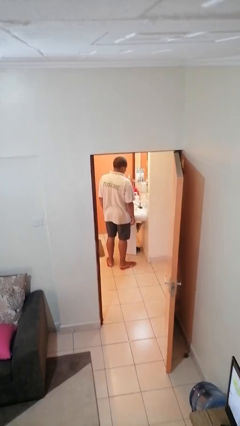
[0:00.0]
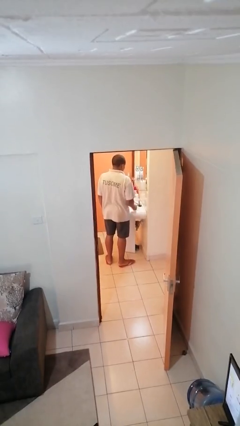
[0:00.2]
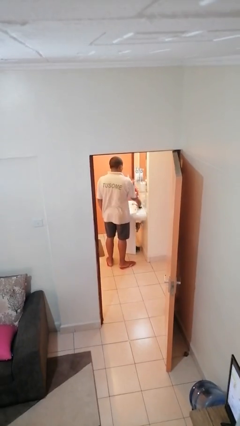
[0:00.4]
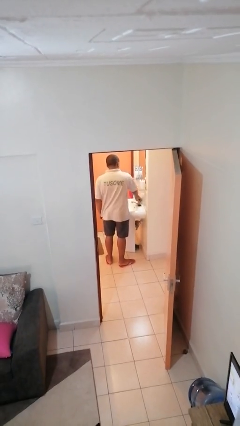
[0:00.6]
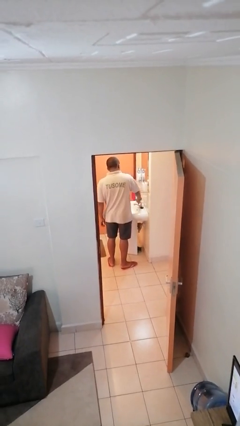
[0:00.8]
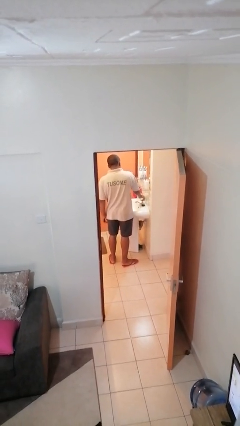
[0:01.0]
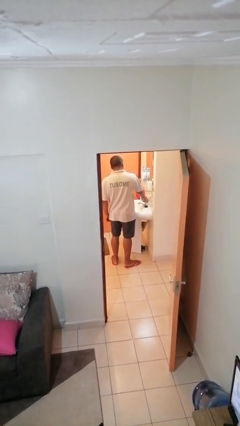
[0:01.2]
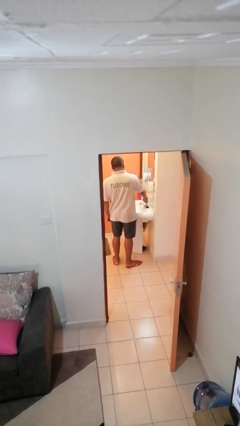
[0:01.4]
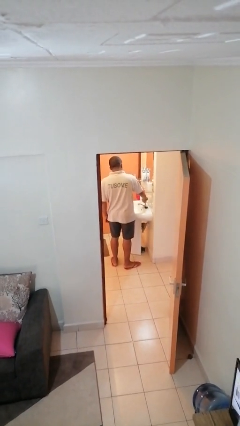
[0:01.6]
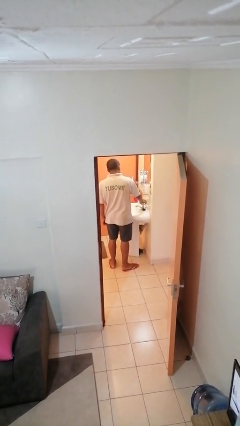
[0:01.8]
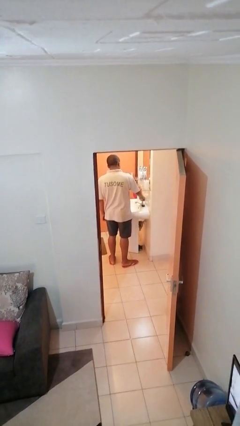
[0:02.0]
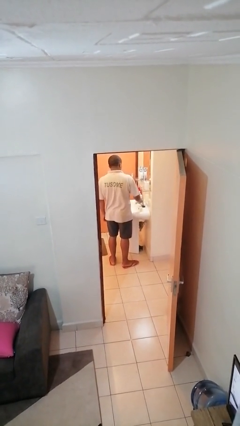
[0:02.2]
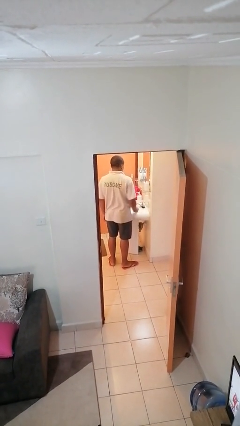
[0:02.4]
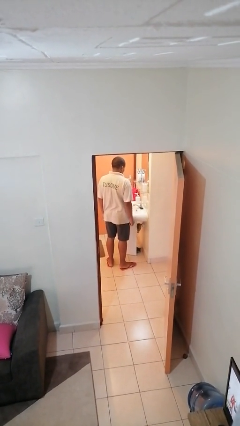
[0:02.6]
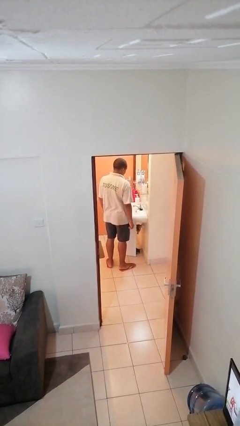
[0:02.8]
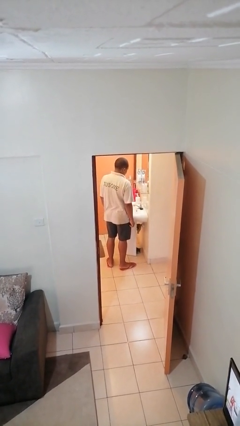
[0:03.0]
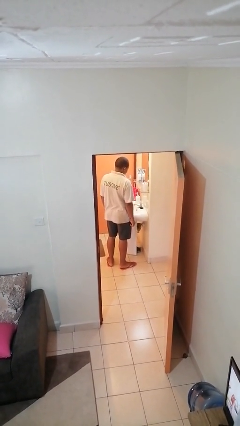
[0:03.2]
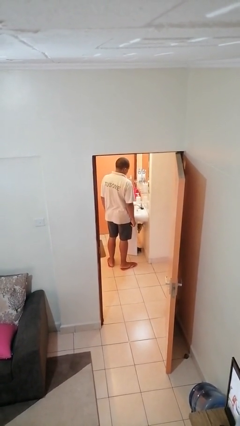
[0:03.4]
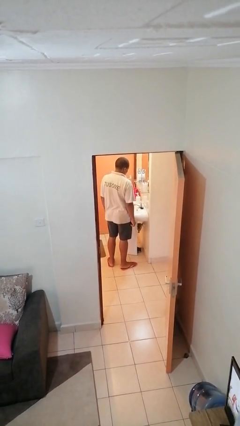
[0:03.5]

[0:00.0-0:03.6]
person turns on faucet

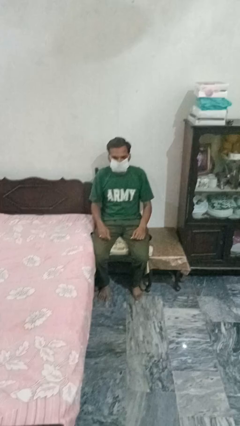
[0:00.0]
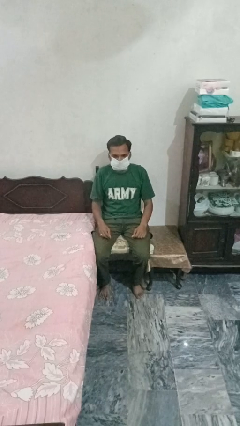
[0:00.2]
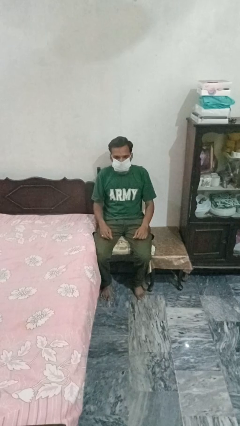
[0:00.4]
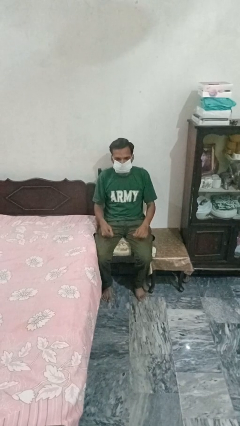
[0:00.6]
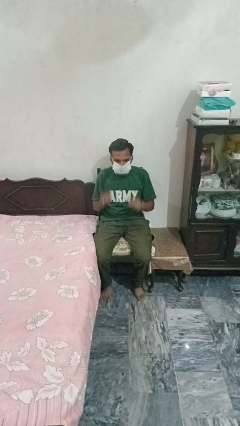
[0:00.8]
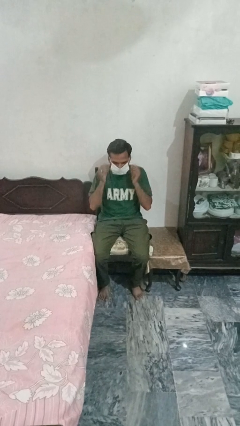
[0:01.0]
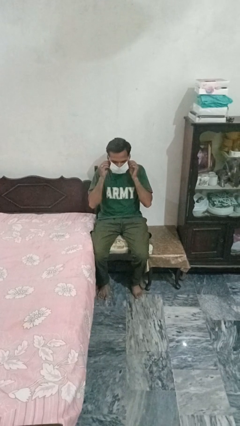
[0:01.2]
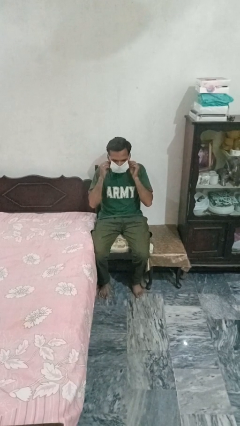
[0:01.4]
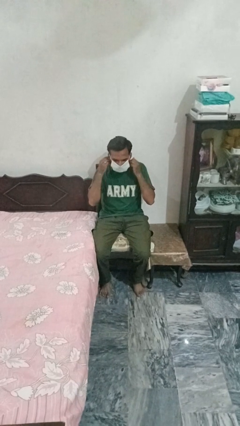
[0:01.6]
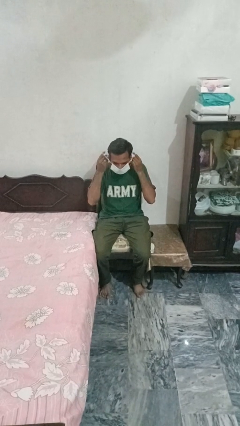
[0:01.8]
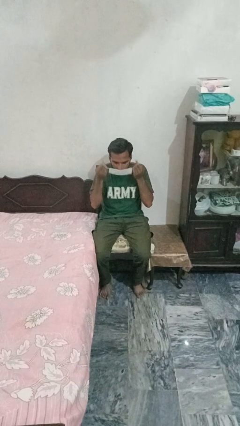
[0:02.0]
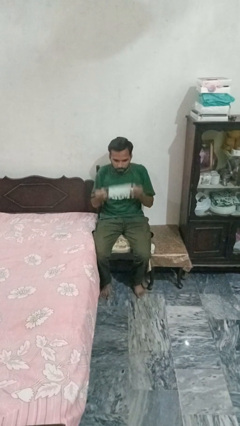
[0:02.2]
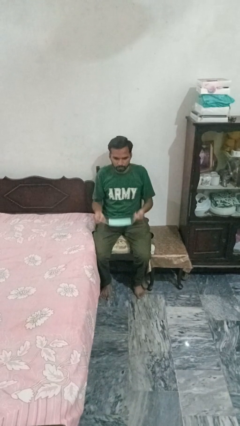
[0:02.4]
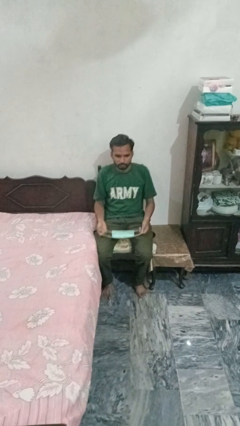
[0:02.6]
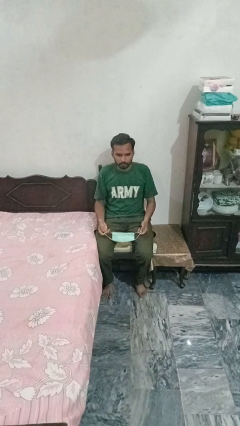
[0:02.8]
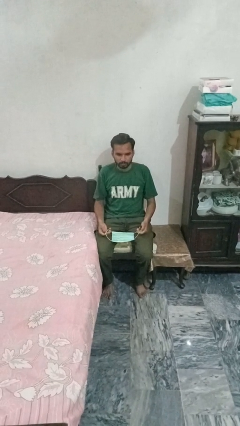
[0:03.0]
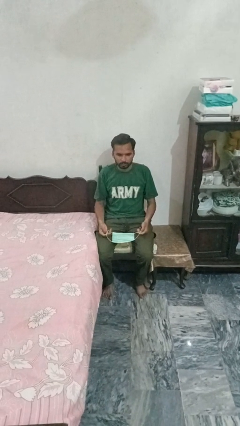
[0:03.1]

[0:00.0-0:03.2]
person takes off facemask

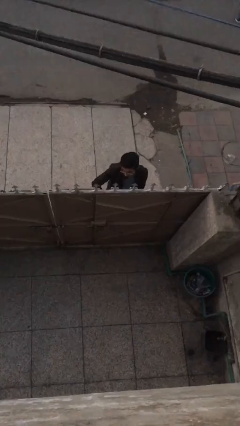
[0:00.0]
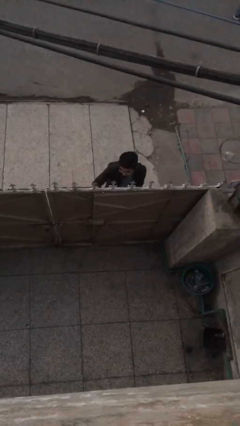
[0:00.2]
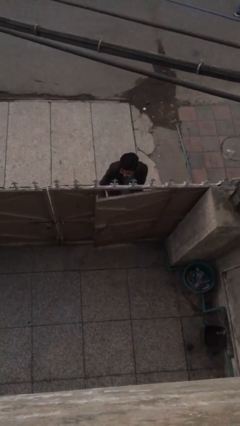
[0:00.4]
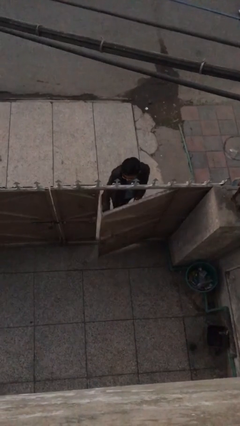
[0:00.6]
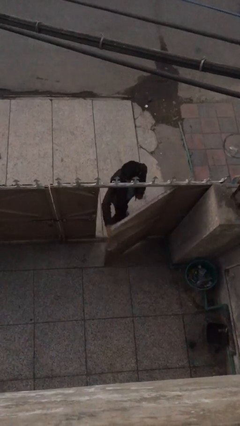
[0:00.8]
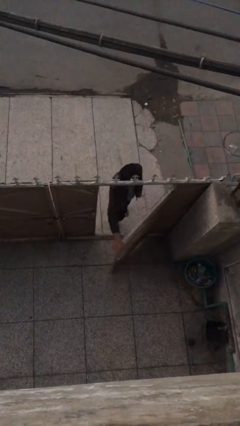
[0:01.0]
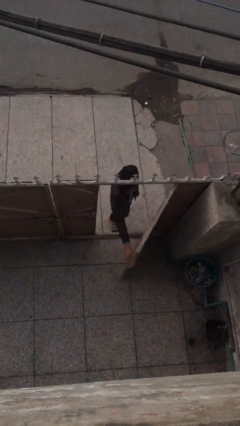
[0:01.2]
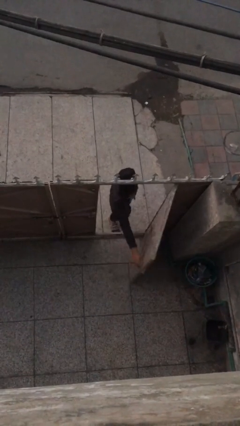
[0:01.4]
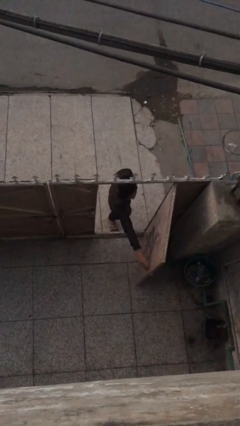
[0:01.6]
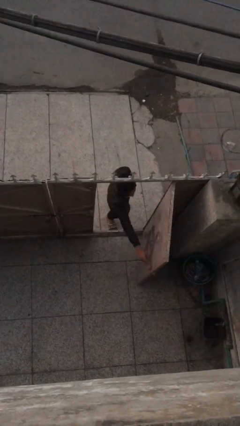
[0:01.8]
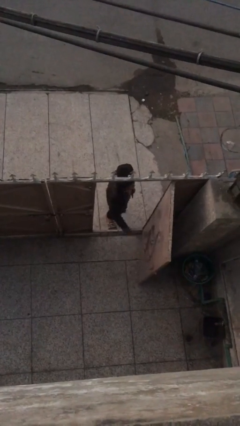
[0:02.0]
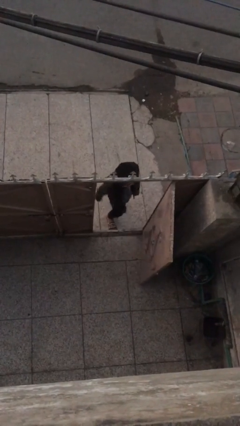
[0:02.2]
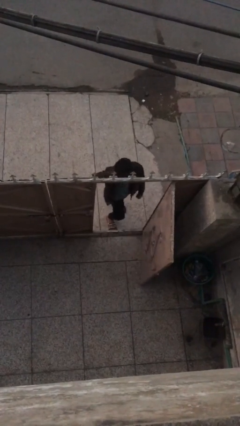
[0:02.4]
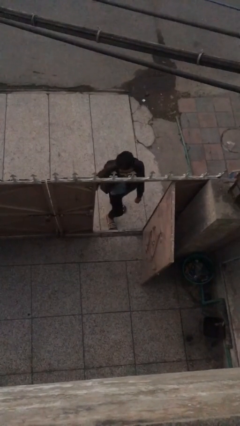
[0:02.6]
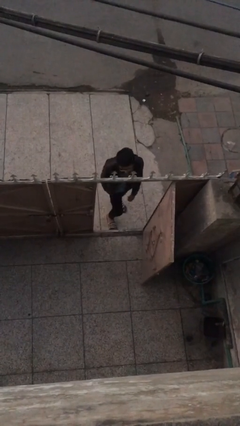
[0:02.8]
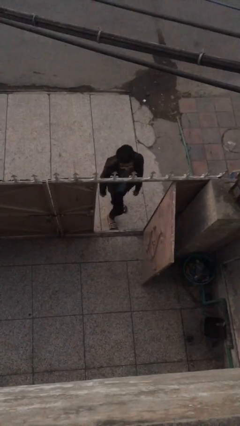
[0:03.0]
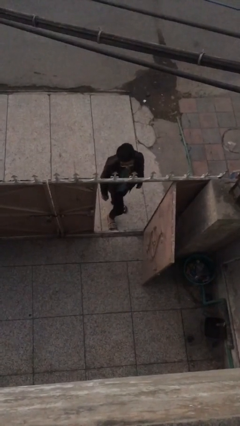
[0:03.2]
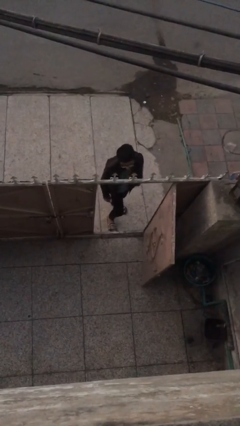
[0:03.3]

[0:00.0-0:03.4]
person opens facility door

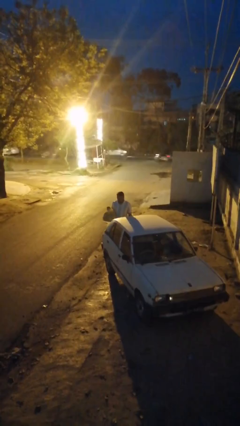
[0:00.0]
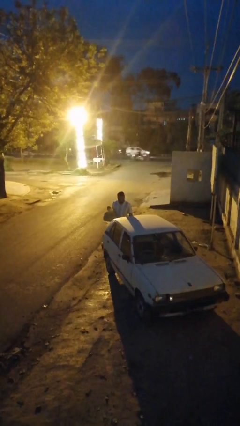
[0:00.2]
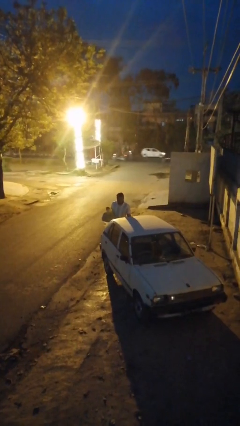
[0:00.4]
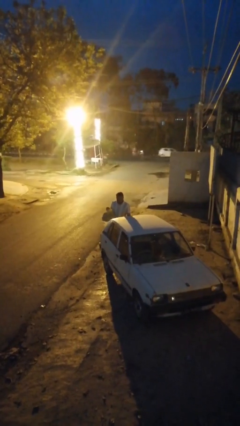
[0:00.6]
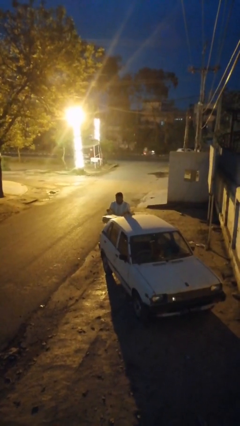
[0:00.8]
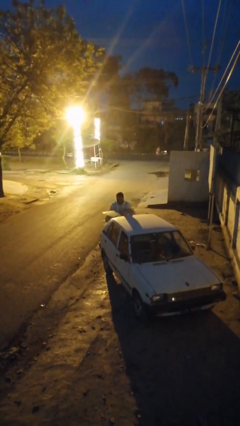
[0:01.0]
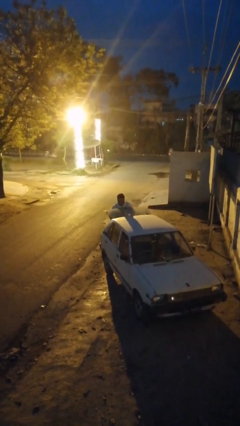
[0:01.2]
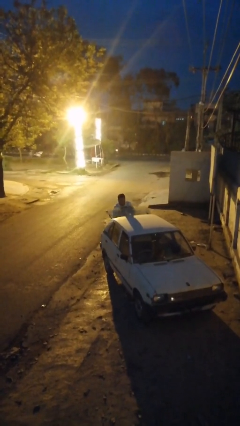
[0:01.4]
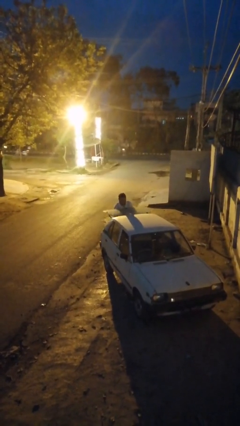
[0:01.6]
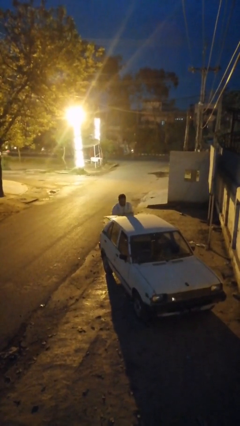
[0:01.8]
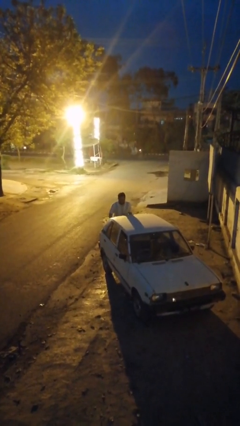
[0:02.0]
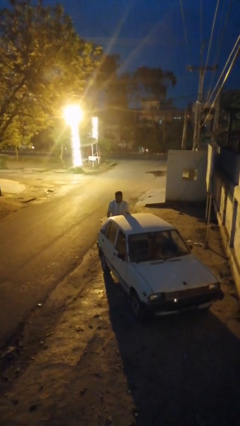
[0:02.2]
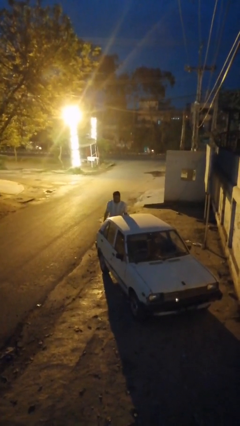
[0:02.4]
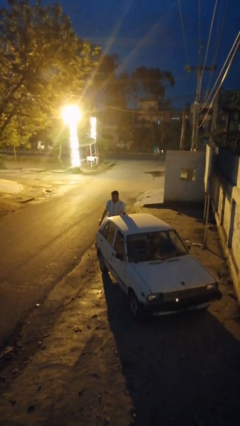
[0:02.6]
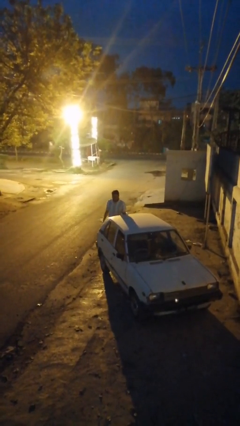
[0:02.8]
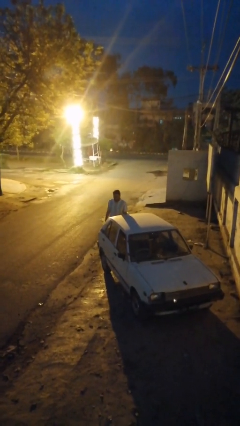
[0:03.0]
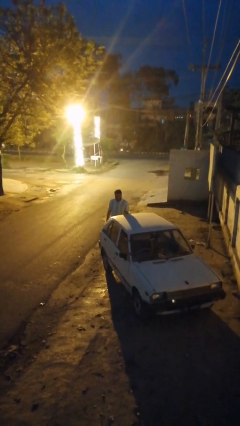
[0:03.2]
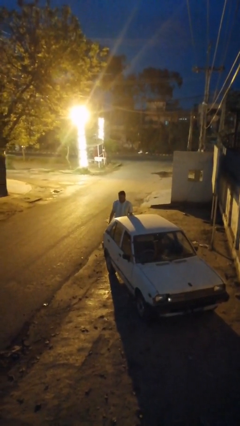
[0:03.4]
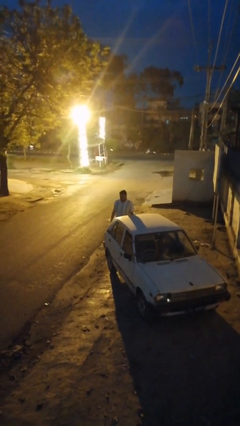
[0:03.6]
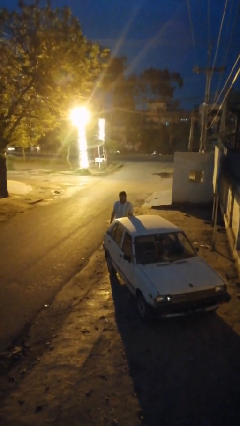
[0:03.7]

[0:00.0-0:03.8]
person loads car

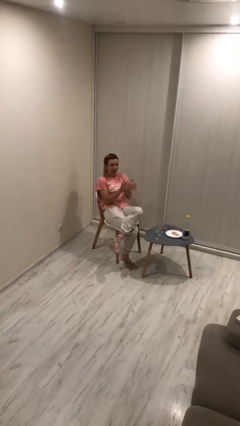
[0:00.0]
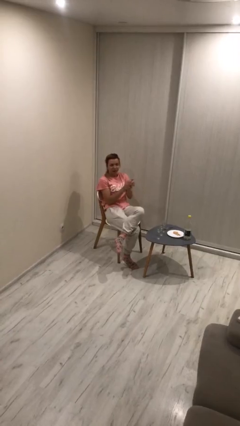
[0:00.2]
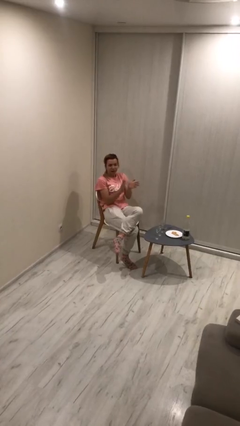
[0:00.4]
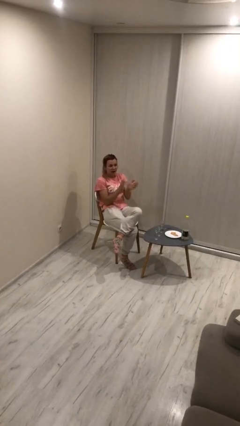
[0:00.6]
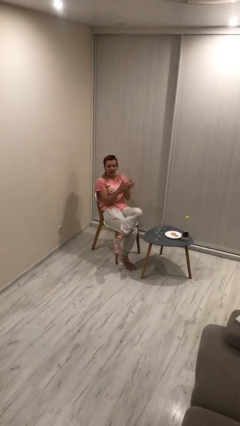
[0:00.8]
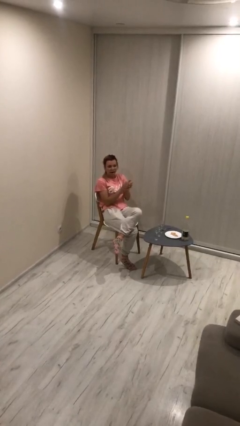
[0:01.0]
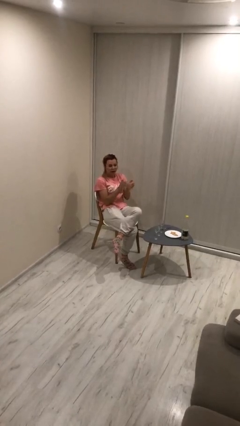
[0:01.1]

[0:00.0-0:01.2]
person claps hands

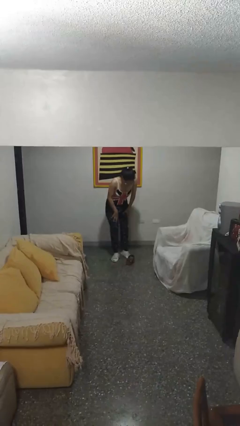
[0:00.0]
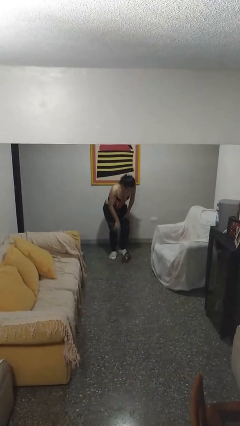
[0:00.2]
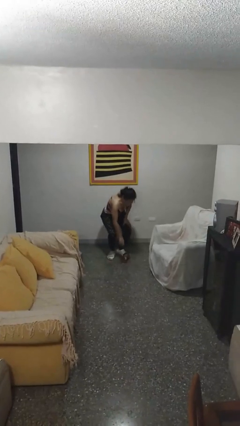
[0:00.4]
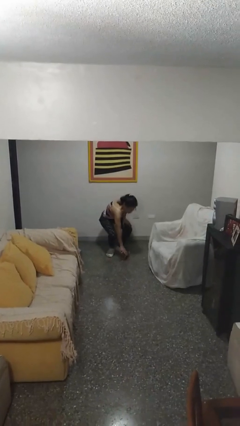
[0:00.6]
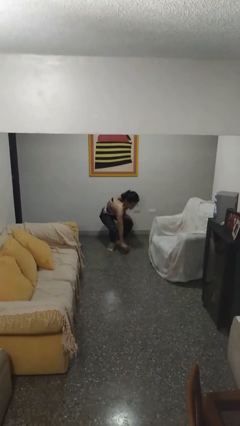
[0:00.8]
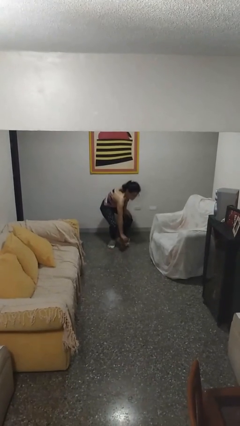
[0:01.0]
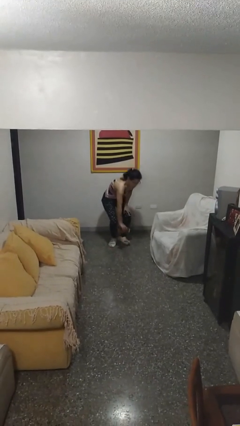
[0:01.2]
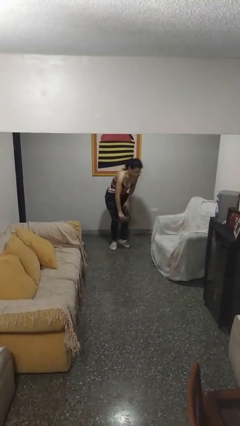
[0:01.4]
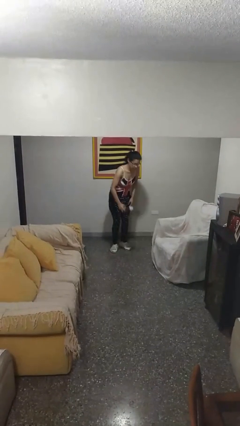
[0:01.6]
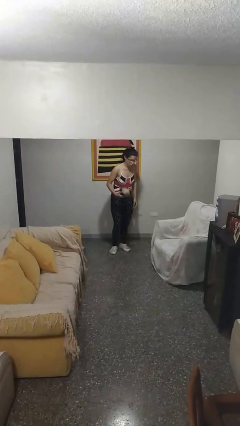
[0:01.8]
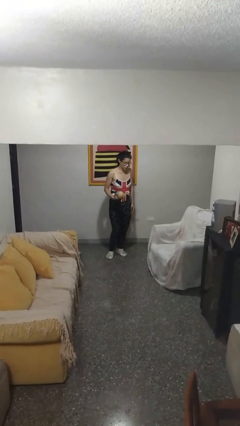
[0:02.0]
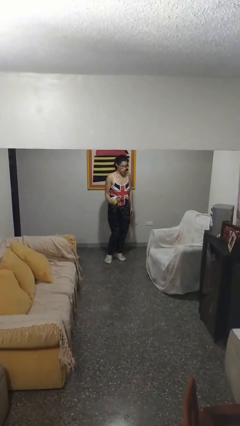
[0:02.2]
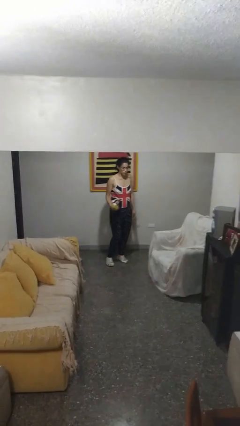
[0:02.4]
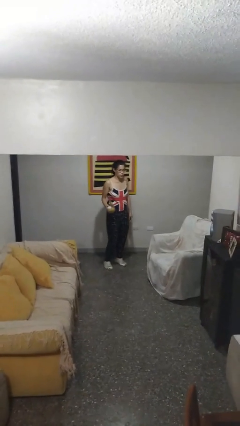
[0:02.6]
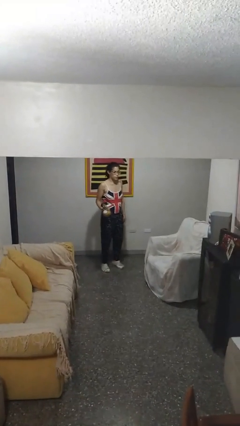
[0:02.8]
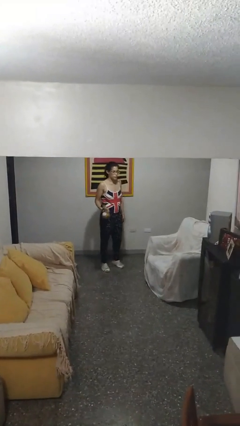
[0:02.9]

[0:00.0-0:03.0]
person picks up object from floor
